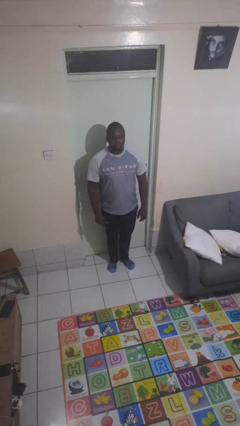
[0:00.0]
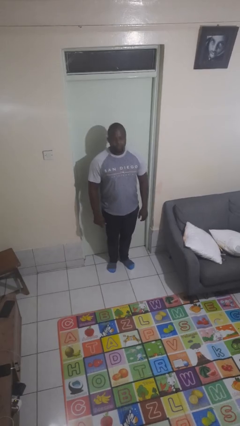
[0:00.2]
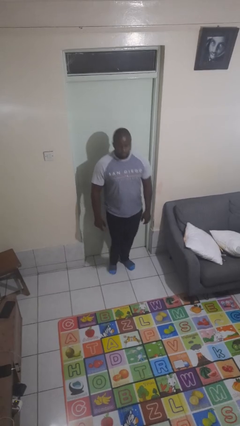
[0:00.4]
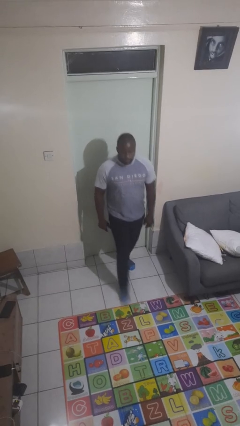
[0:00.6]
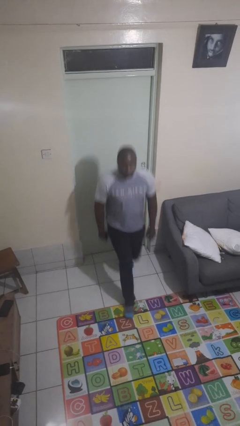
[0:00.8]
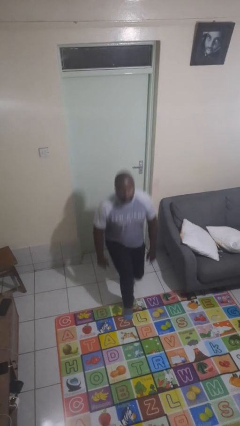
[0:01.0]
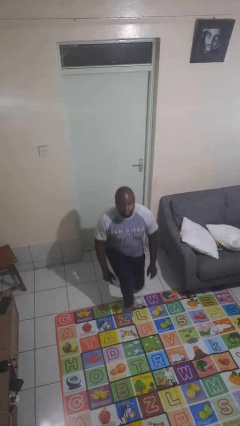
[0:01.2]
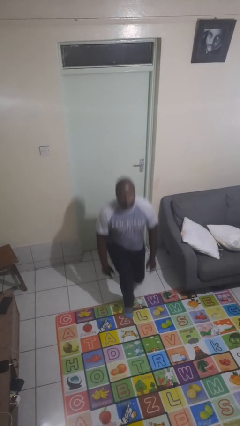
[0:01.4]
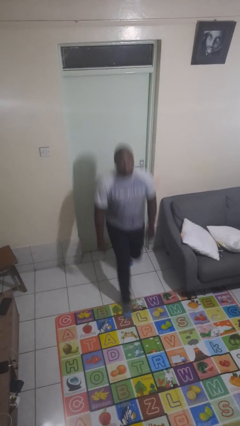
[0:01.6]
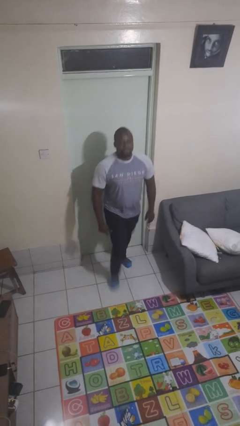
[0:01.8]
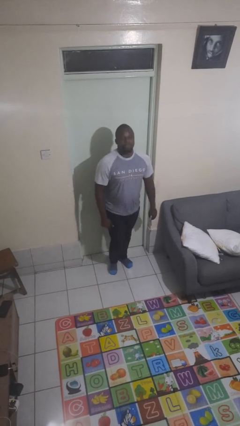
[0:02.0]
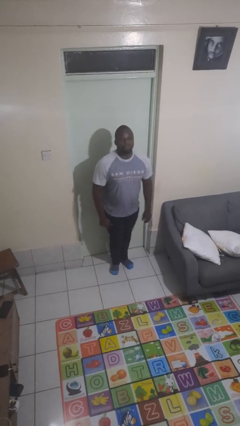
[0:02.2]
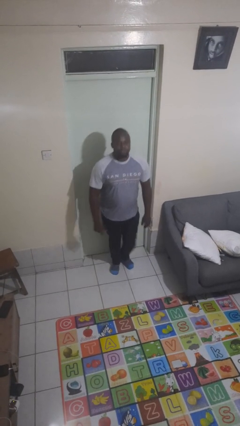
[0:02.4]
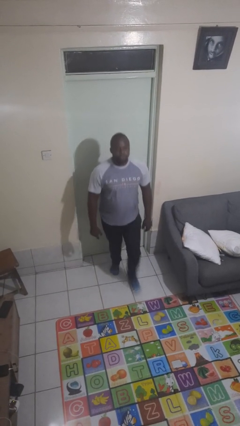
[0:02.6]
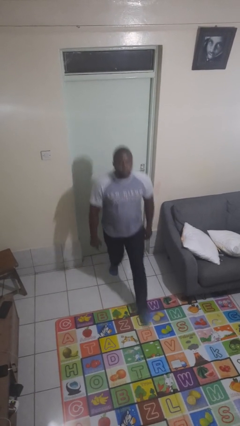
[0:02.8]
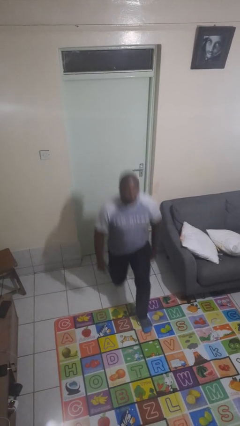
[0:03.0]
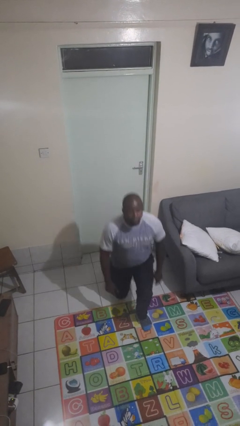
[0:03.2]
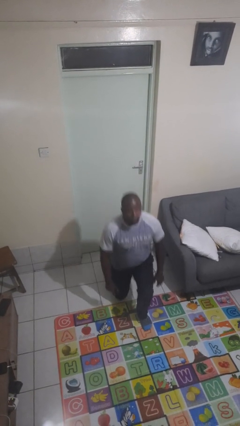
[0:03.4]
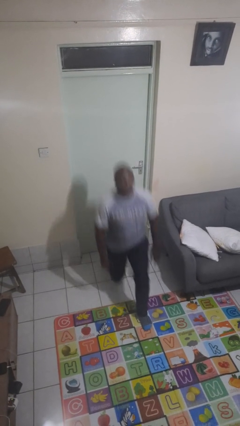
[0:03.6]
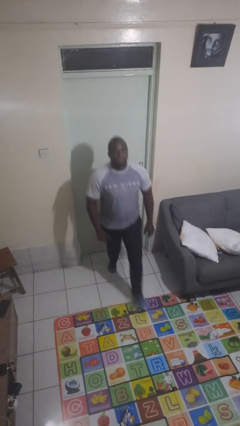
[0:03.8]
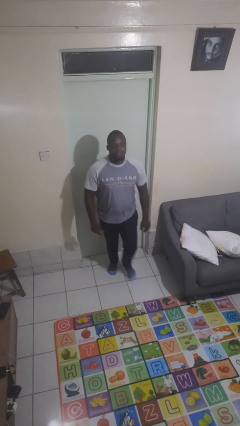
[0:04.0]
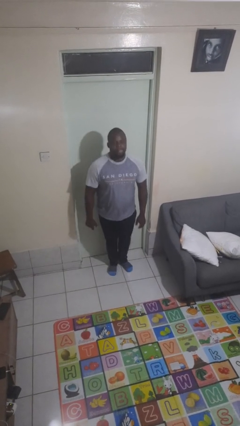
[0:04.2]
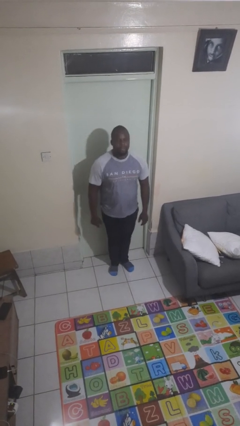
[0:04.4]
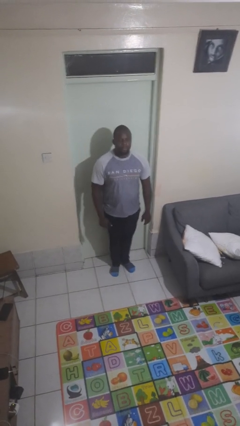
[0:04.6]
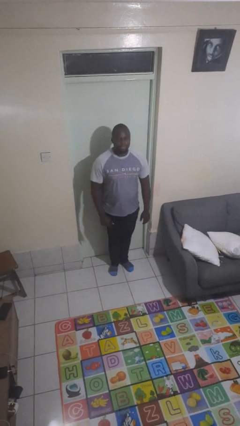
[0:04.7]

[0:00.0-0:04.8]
person exercises with lunges

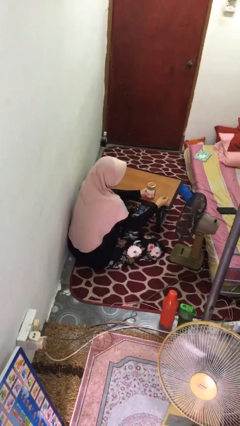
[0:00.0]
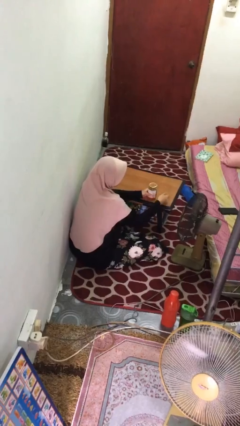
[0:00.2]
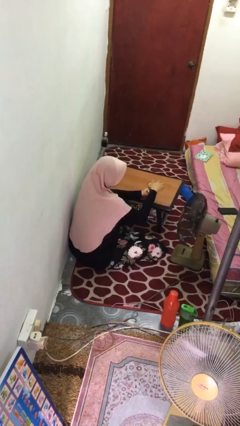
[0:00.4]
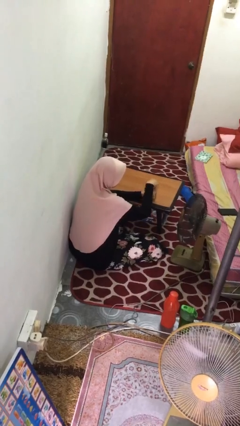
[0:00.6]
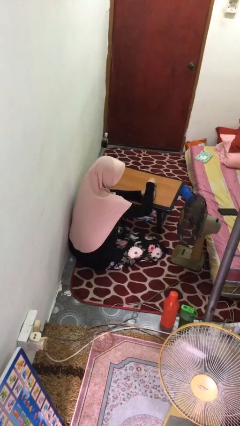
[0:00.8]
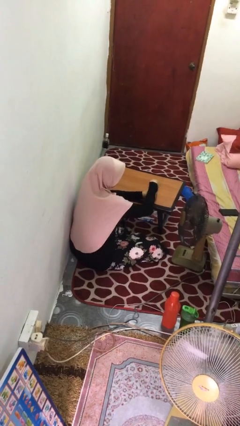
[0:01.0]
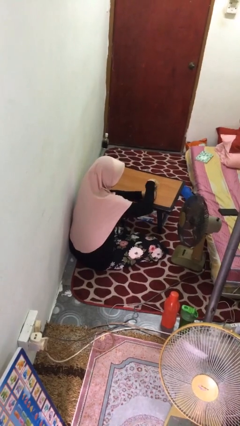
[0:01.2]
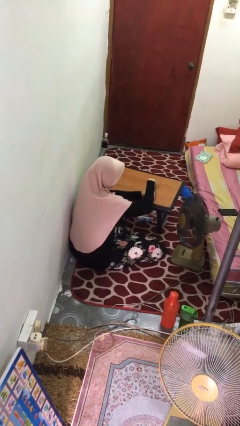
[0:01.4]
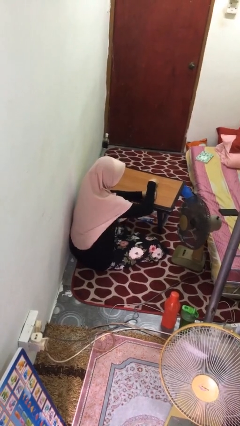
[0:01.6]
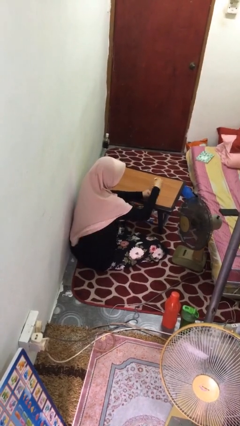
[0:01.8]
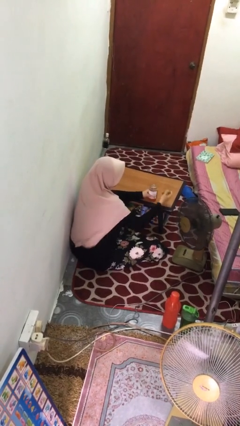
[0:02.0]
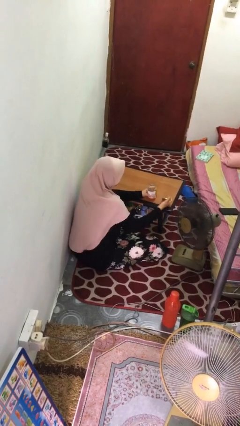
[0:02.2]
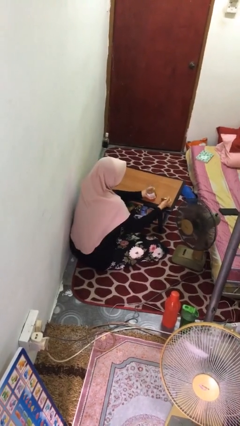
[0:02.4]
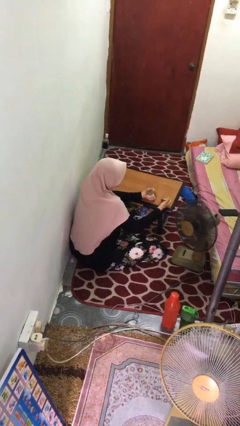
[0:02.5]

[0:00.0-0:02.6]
person opens jar

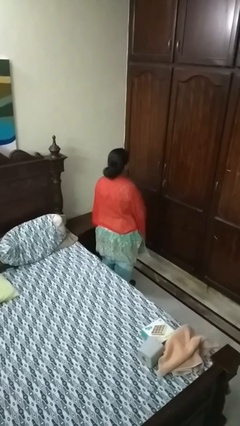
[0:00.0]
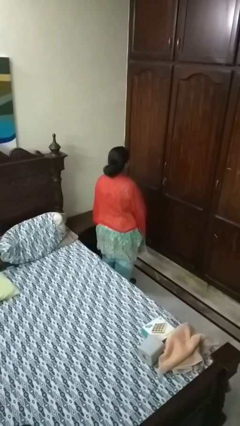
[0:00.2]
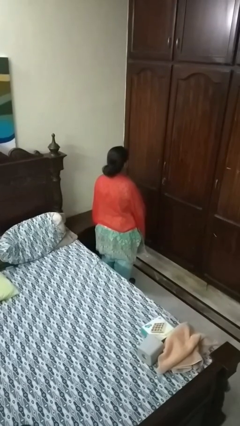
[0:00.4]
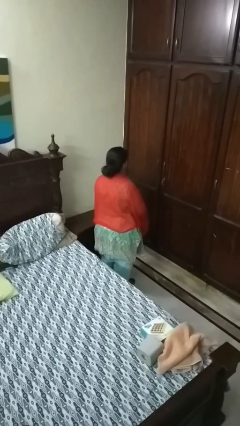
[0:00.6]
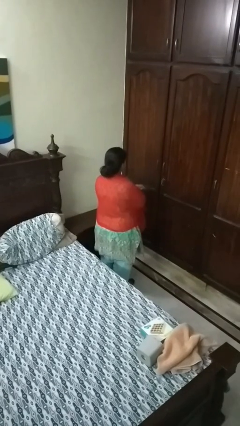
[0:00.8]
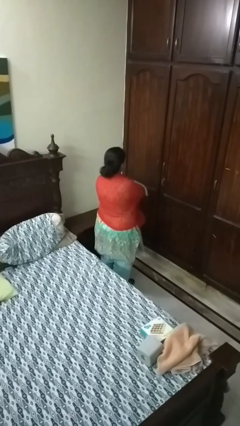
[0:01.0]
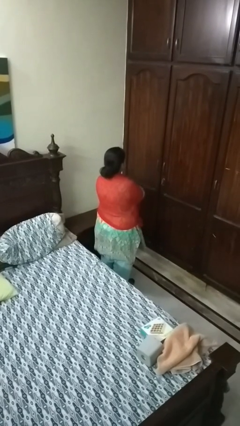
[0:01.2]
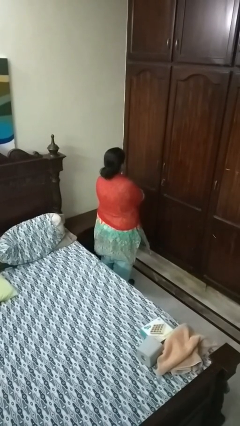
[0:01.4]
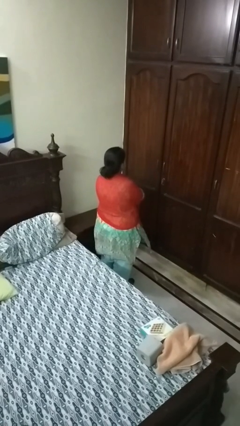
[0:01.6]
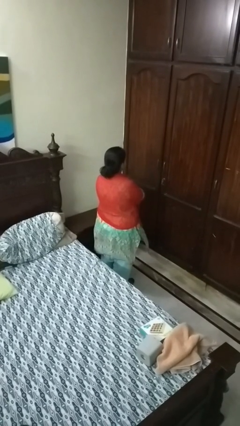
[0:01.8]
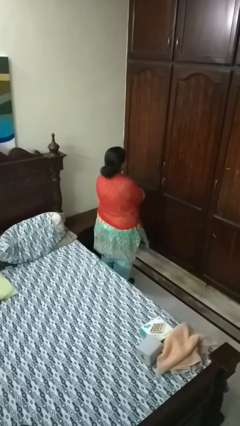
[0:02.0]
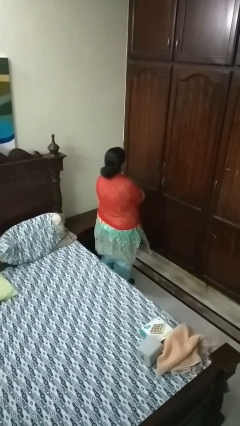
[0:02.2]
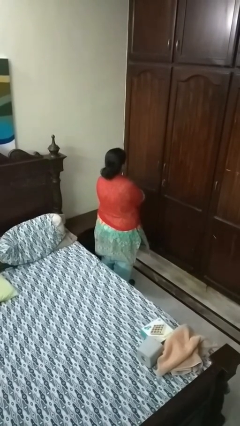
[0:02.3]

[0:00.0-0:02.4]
person crosses arms

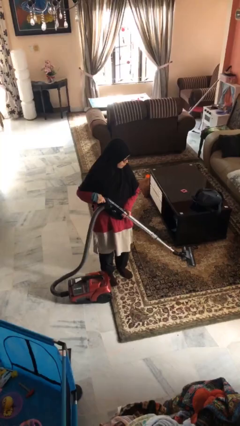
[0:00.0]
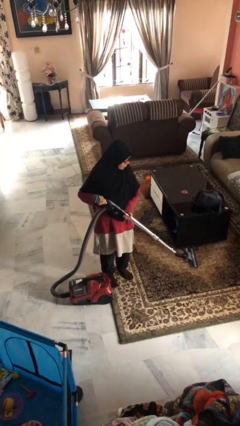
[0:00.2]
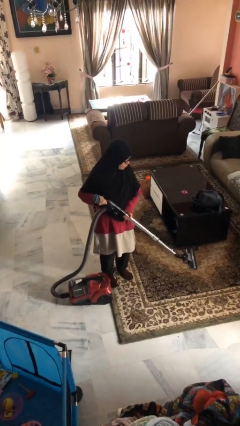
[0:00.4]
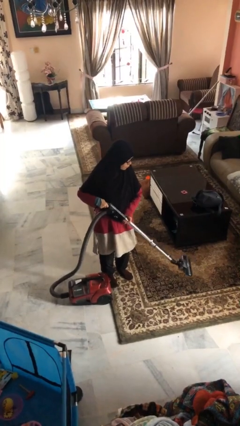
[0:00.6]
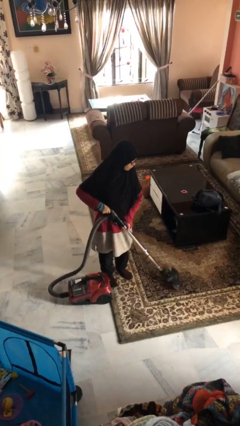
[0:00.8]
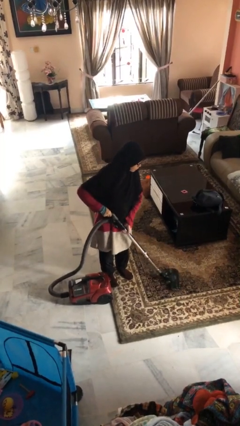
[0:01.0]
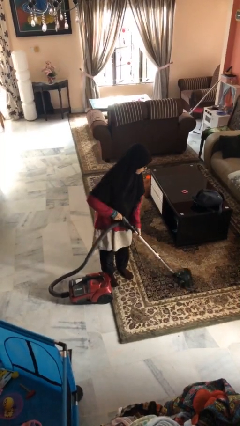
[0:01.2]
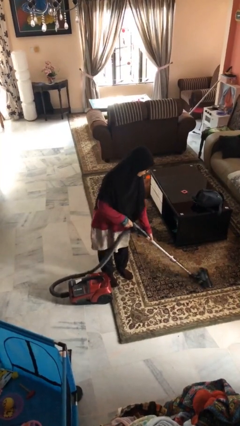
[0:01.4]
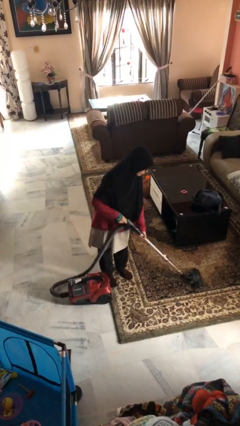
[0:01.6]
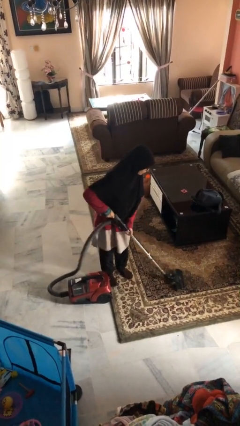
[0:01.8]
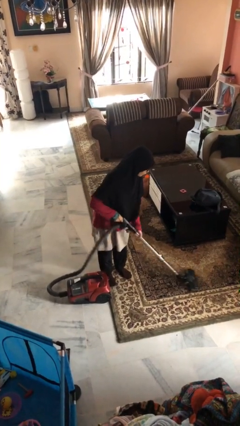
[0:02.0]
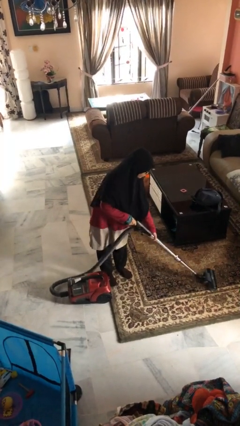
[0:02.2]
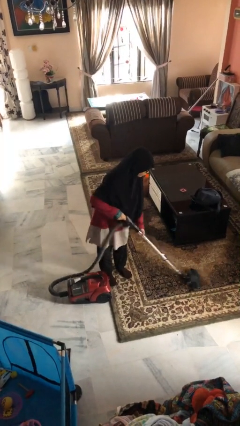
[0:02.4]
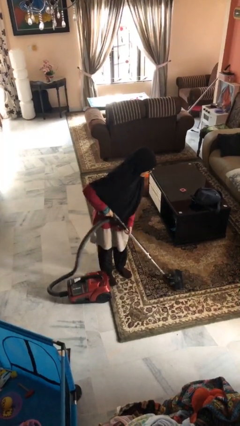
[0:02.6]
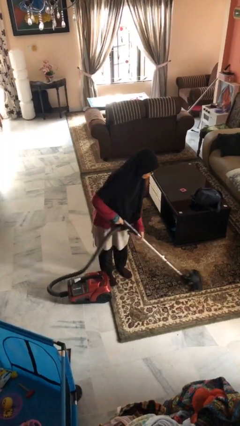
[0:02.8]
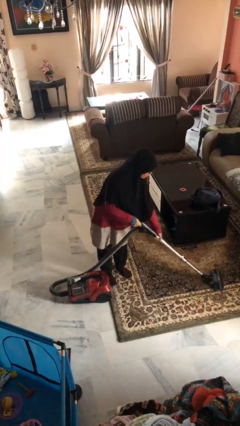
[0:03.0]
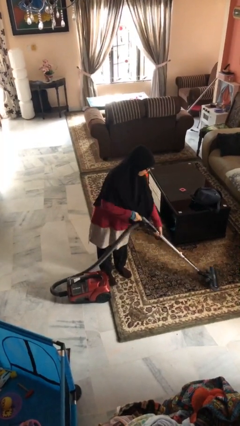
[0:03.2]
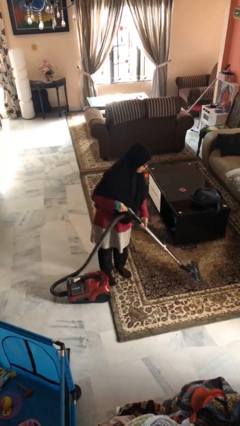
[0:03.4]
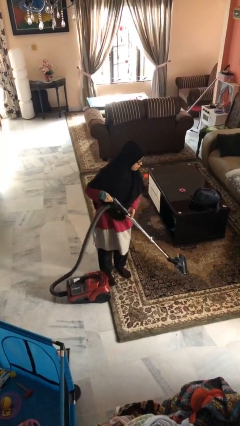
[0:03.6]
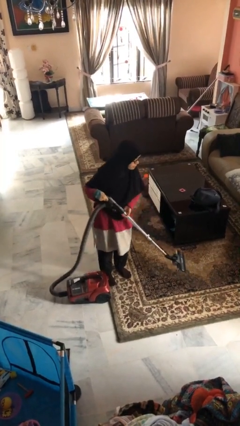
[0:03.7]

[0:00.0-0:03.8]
person vacuums carpet

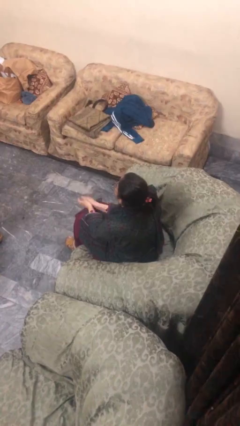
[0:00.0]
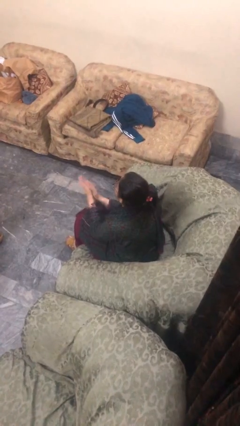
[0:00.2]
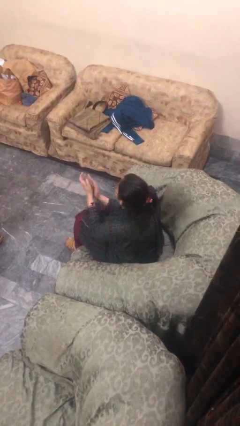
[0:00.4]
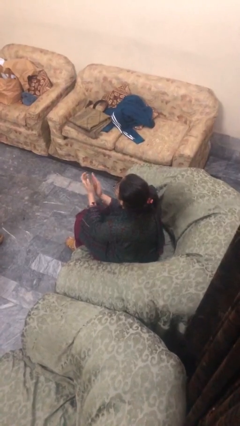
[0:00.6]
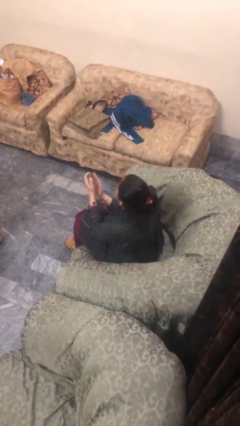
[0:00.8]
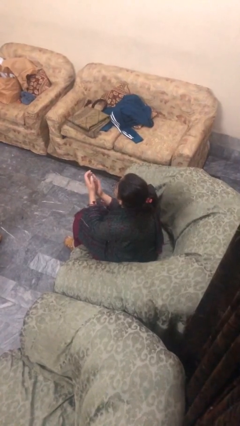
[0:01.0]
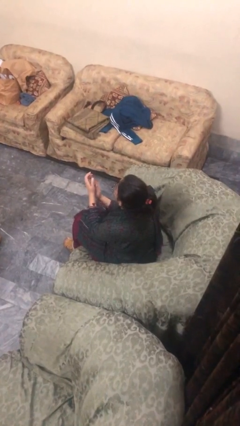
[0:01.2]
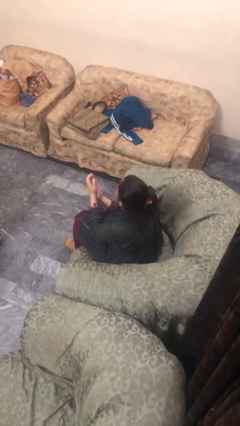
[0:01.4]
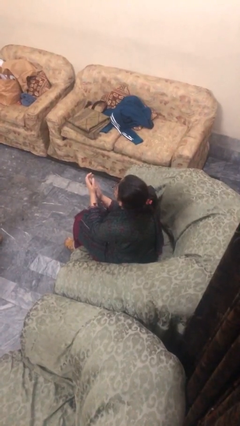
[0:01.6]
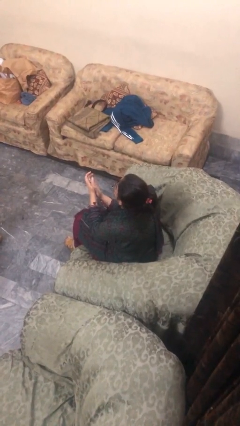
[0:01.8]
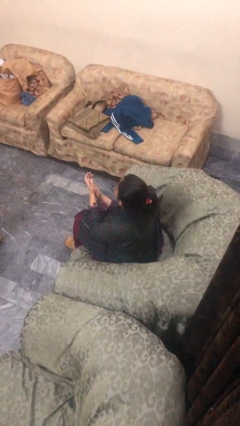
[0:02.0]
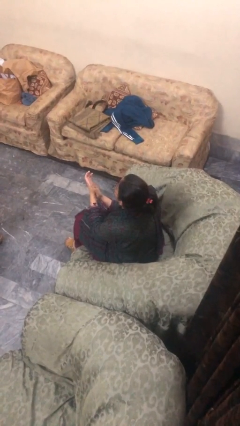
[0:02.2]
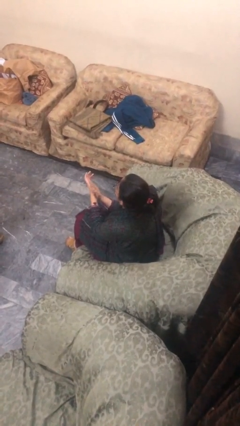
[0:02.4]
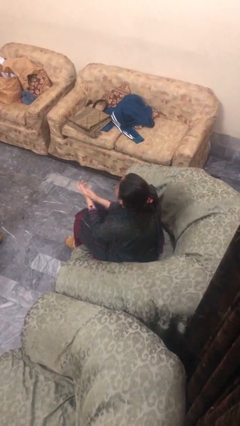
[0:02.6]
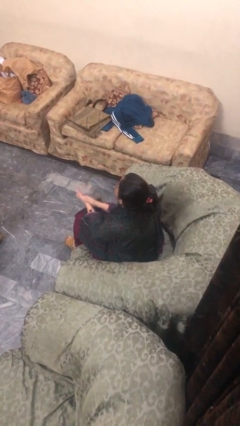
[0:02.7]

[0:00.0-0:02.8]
person claps hands

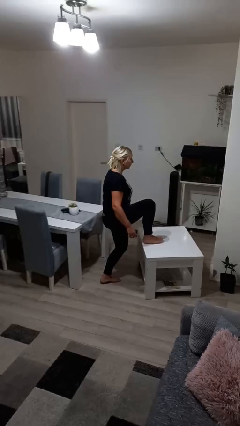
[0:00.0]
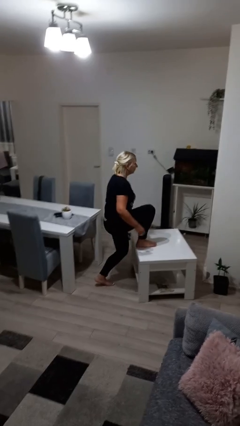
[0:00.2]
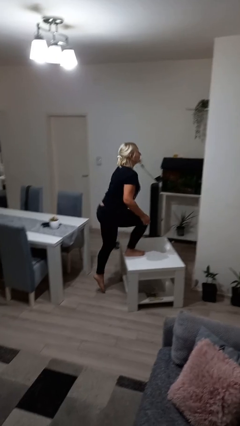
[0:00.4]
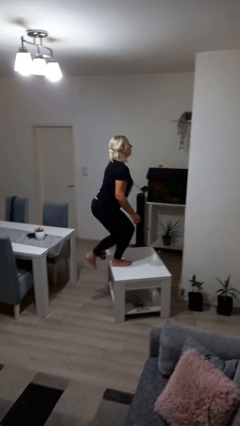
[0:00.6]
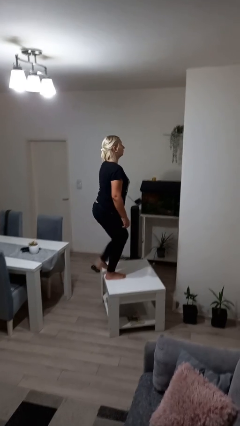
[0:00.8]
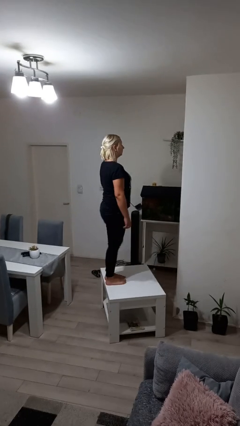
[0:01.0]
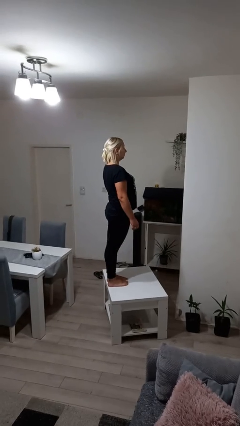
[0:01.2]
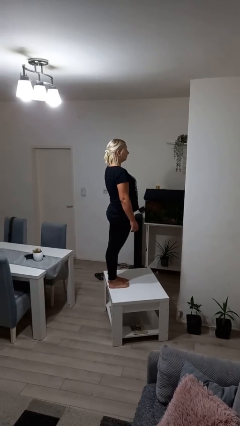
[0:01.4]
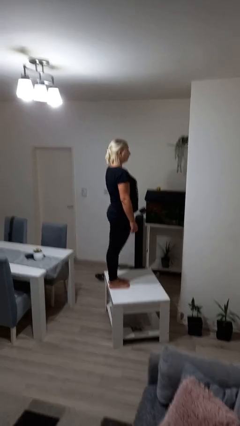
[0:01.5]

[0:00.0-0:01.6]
person climbs on table
